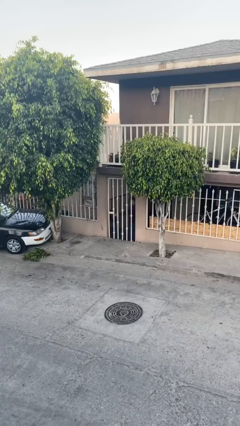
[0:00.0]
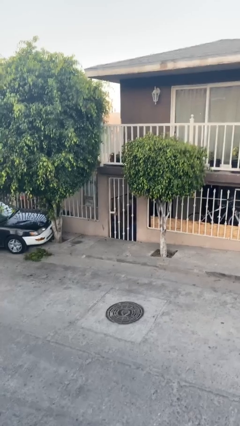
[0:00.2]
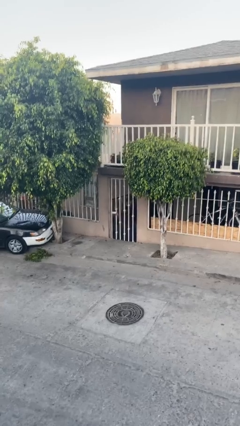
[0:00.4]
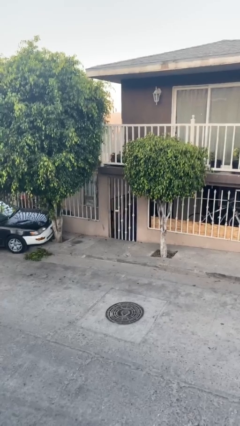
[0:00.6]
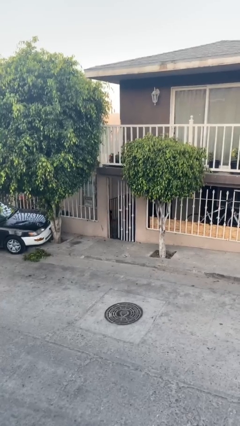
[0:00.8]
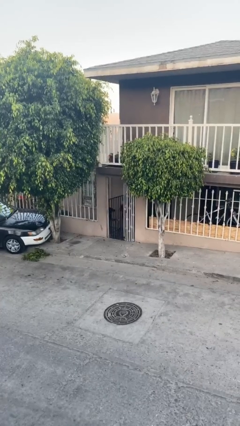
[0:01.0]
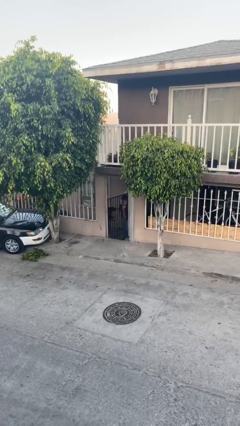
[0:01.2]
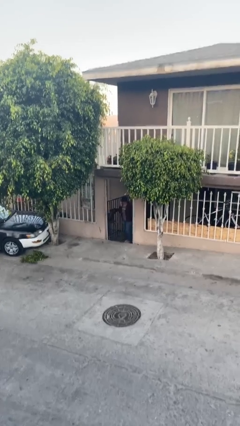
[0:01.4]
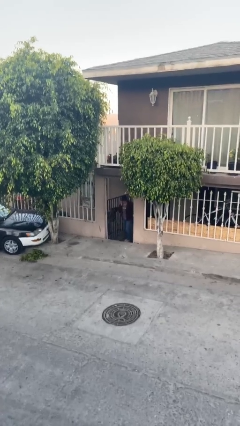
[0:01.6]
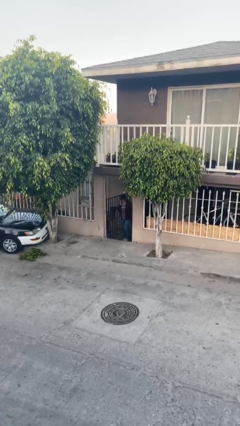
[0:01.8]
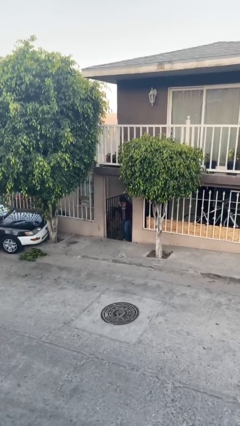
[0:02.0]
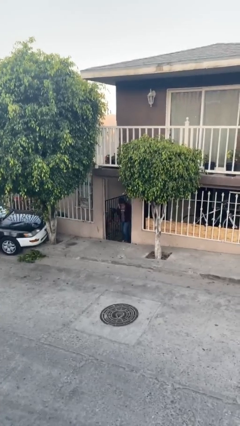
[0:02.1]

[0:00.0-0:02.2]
person opens facility door

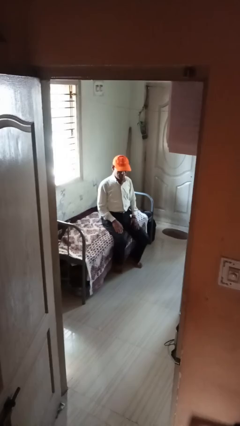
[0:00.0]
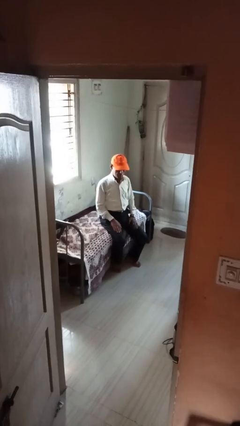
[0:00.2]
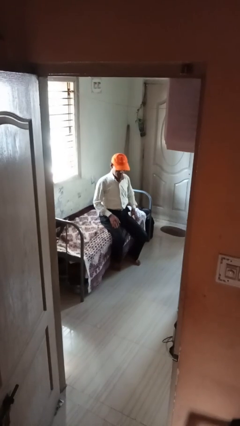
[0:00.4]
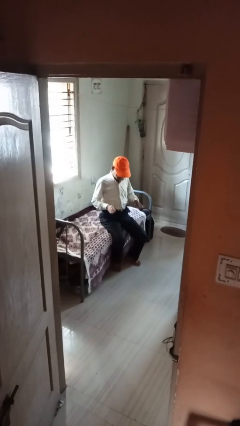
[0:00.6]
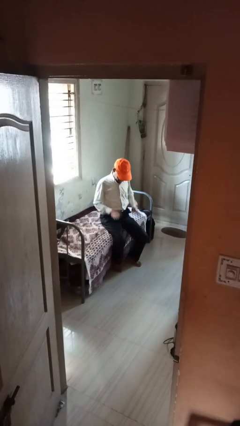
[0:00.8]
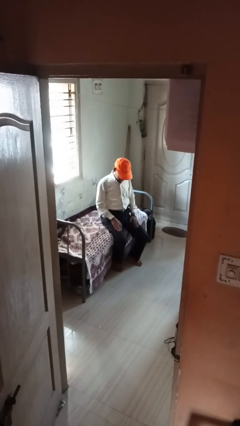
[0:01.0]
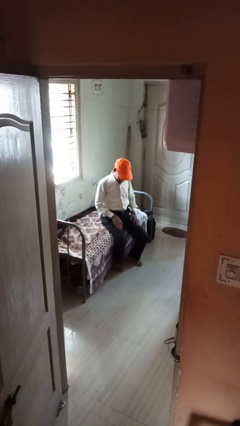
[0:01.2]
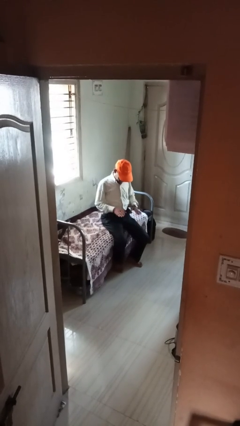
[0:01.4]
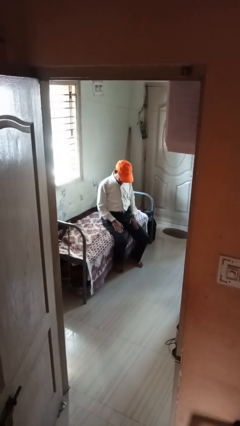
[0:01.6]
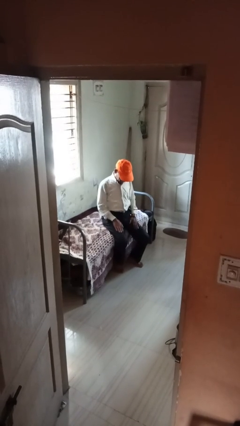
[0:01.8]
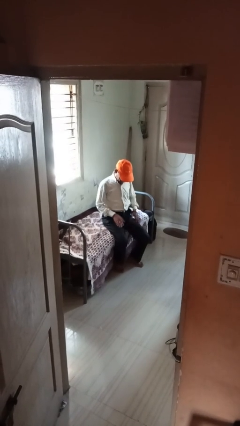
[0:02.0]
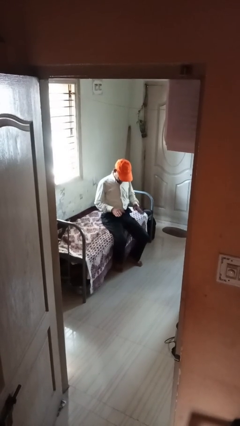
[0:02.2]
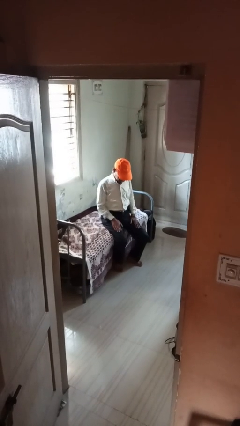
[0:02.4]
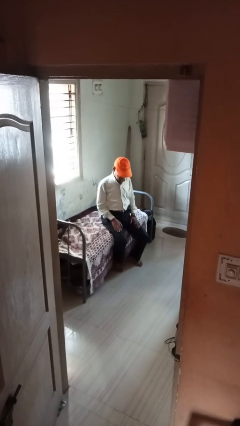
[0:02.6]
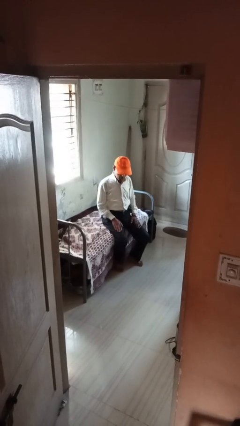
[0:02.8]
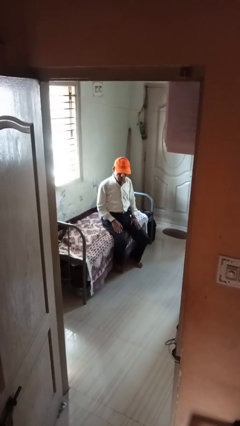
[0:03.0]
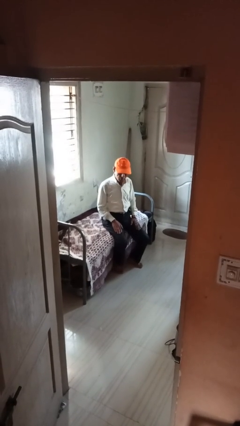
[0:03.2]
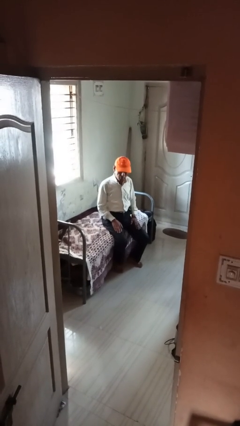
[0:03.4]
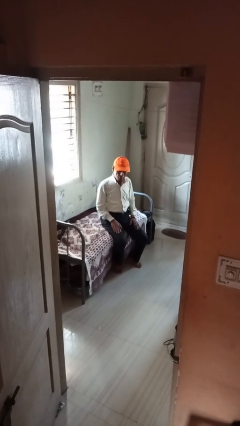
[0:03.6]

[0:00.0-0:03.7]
person slaps hands on thighs

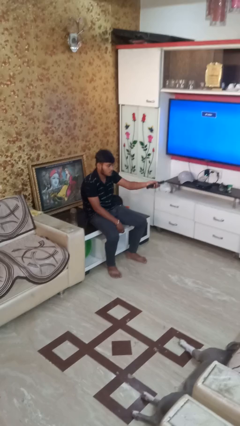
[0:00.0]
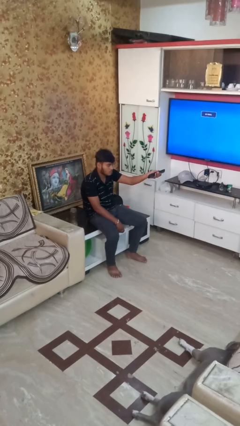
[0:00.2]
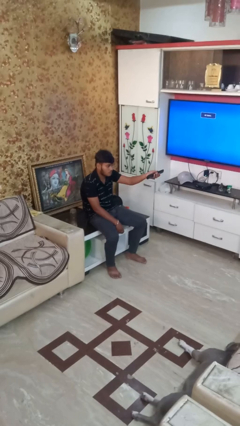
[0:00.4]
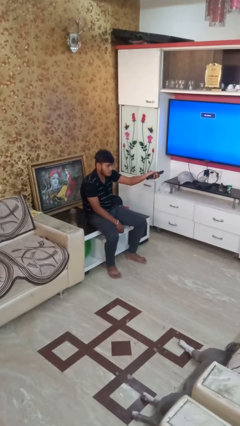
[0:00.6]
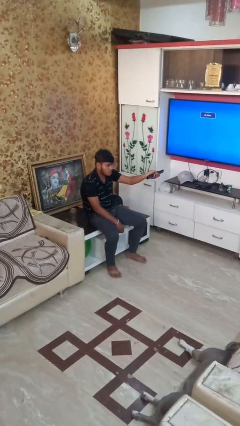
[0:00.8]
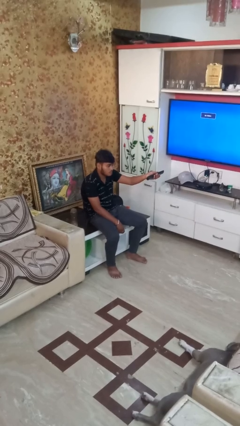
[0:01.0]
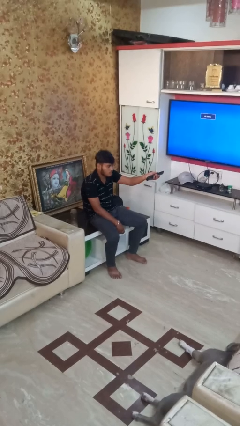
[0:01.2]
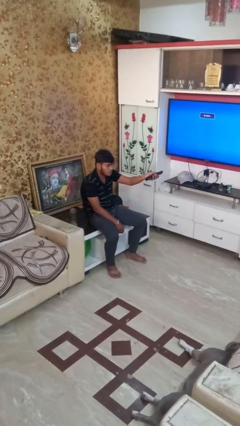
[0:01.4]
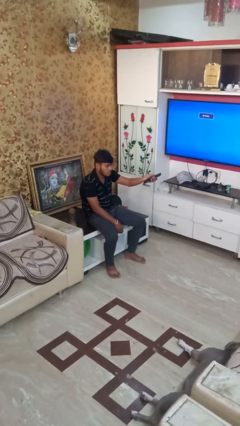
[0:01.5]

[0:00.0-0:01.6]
person uses television remote

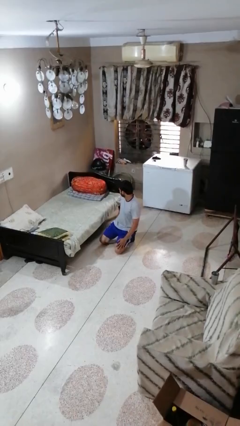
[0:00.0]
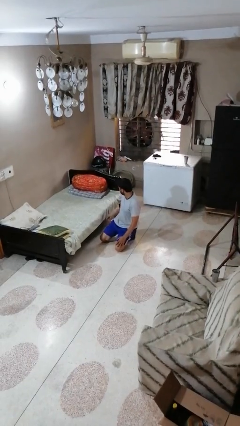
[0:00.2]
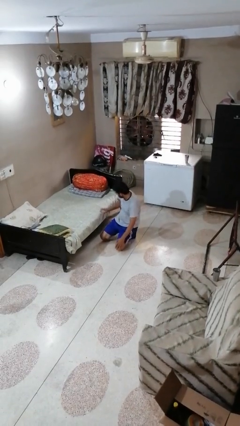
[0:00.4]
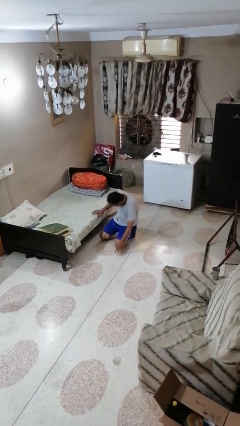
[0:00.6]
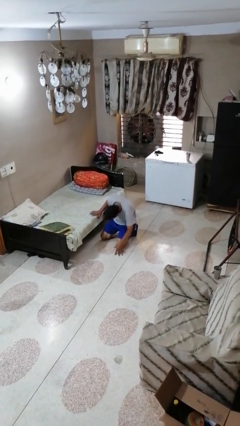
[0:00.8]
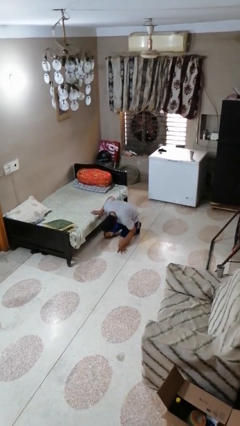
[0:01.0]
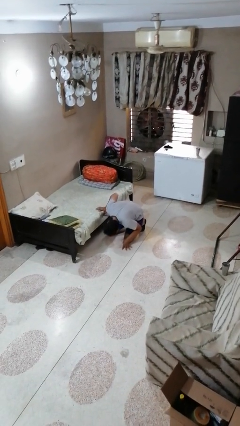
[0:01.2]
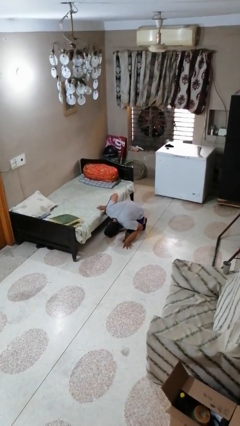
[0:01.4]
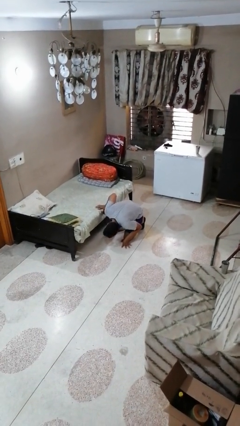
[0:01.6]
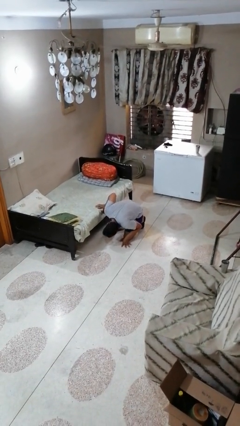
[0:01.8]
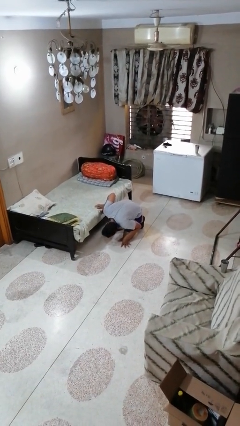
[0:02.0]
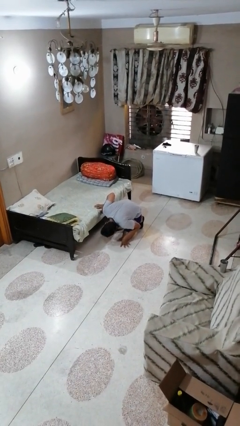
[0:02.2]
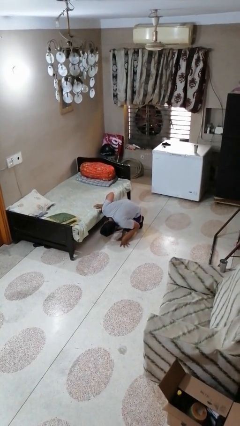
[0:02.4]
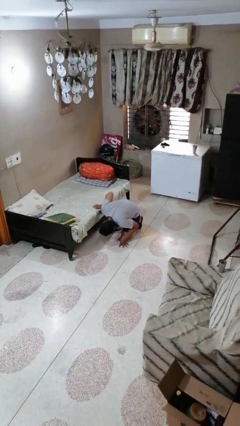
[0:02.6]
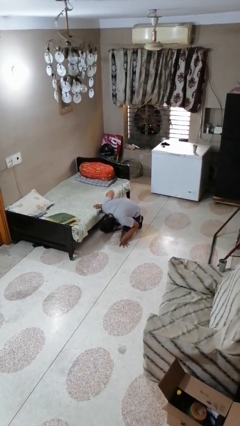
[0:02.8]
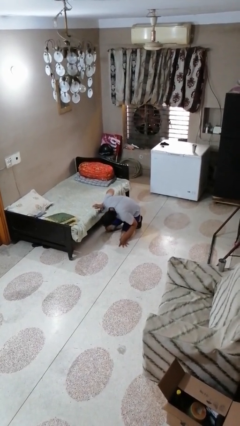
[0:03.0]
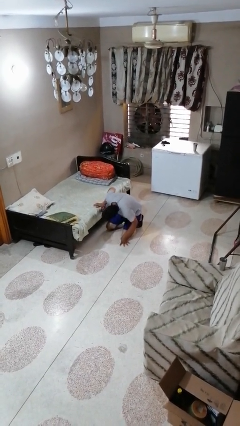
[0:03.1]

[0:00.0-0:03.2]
person searches under bed

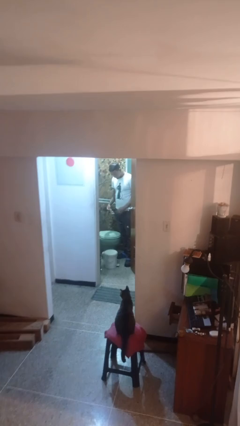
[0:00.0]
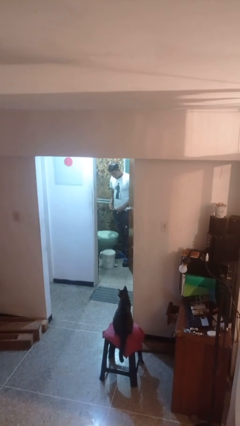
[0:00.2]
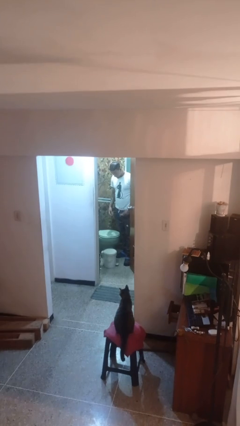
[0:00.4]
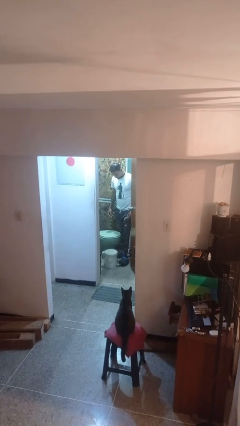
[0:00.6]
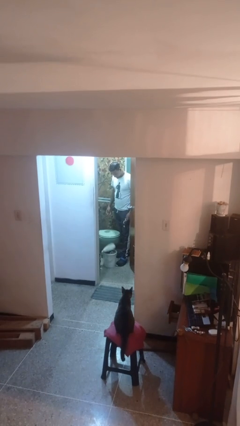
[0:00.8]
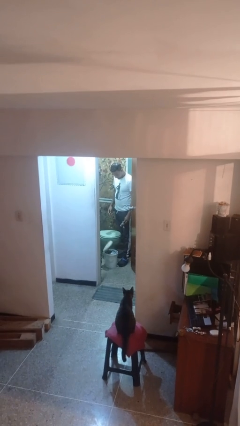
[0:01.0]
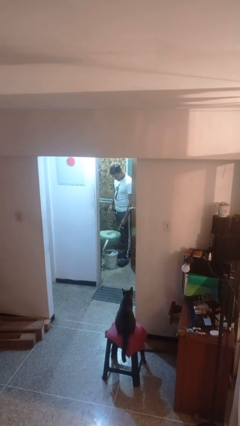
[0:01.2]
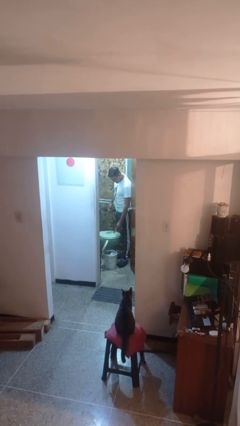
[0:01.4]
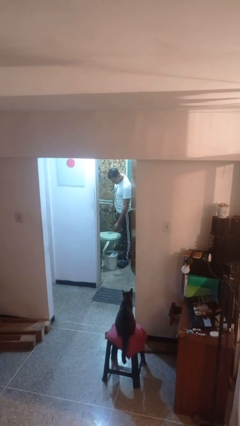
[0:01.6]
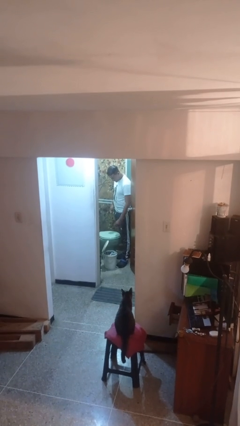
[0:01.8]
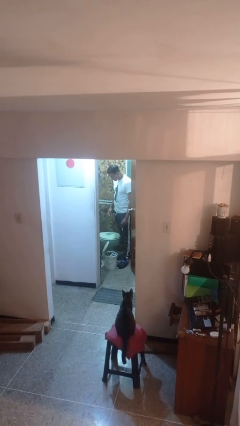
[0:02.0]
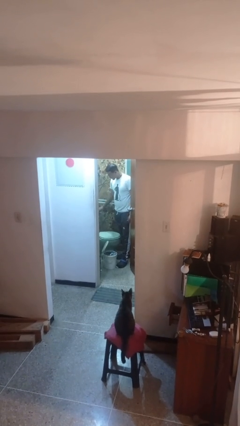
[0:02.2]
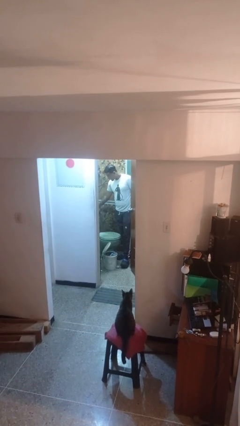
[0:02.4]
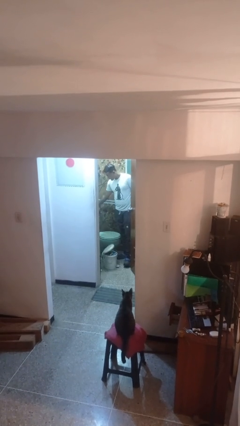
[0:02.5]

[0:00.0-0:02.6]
person discards trash

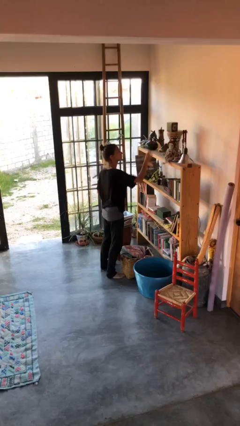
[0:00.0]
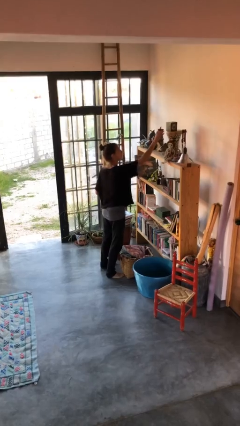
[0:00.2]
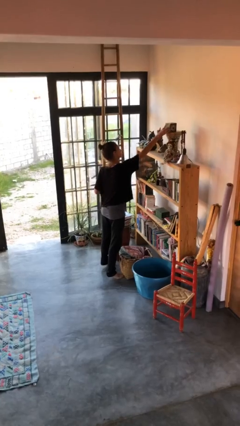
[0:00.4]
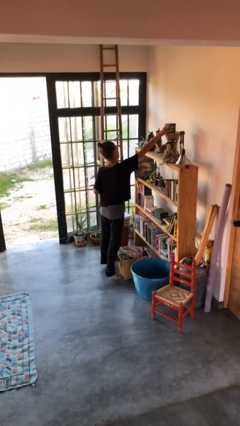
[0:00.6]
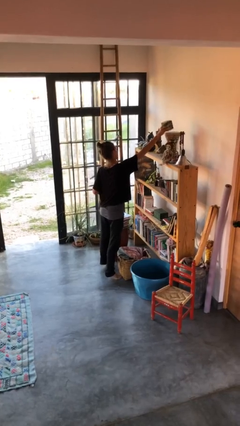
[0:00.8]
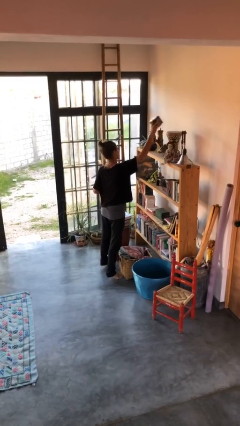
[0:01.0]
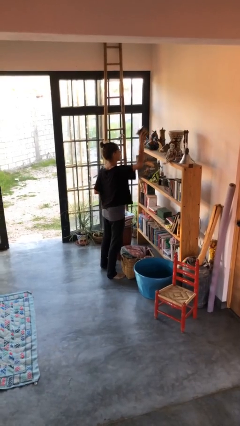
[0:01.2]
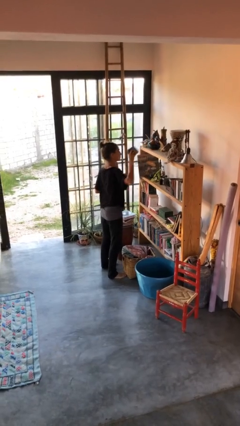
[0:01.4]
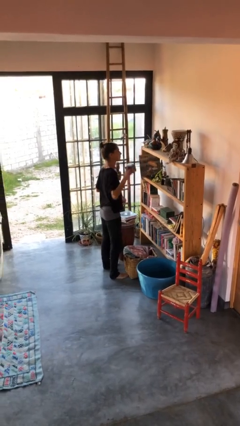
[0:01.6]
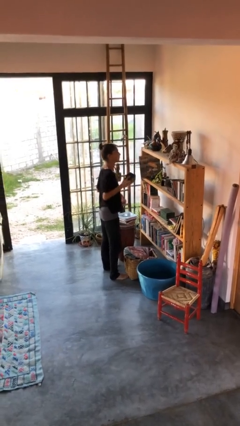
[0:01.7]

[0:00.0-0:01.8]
person picks up object from countertop

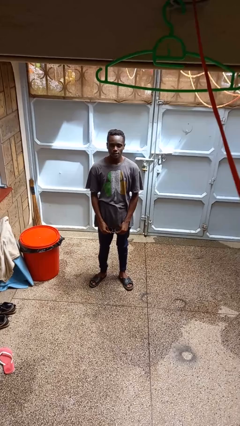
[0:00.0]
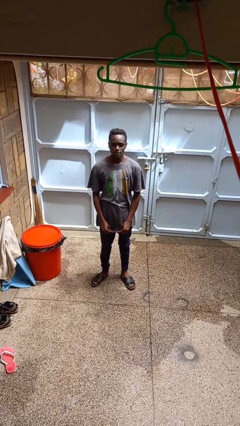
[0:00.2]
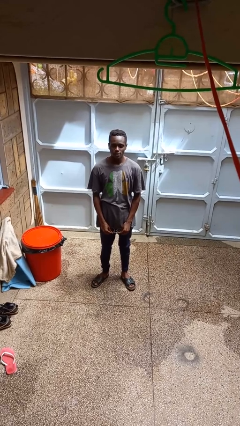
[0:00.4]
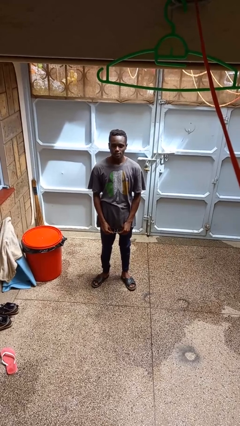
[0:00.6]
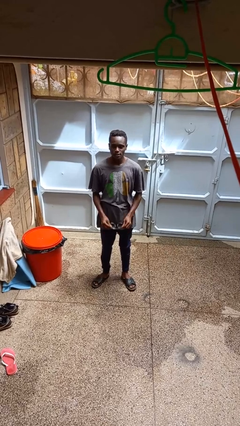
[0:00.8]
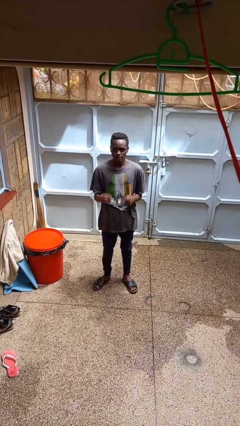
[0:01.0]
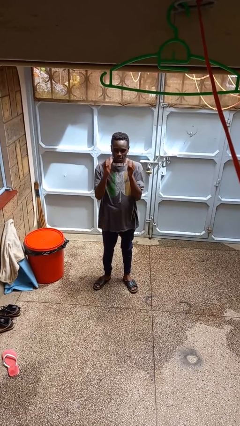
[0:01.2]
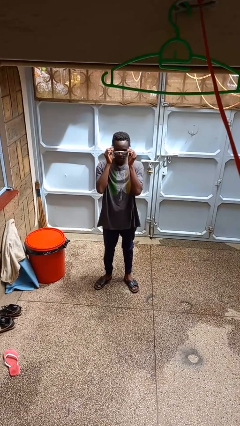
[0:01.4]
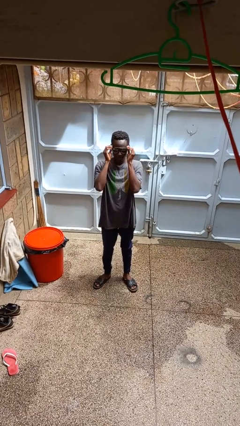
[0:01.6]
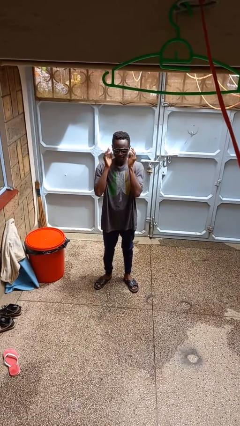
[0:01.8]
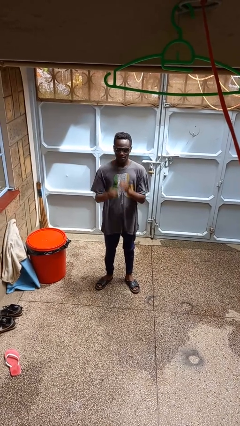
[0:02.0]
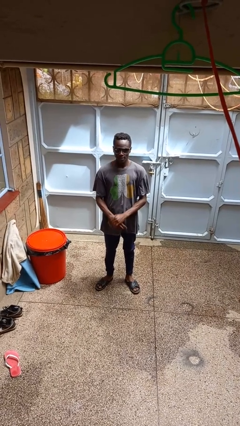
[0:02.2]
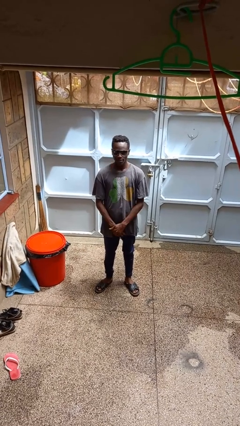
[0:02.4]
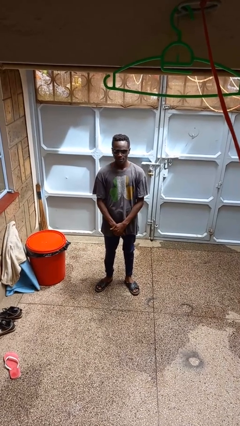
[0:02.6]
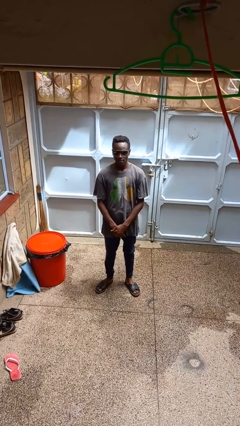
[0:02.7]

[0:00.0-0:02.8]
person puts on sunglasses
